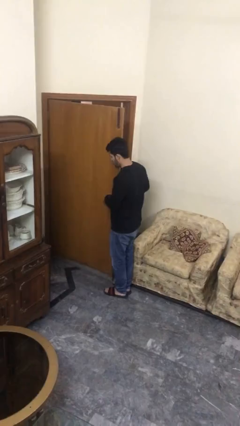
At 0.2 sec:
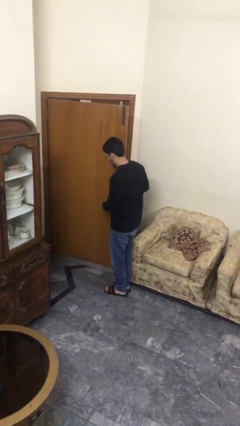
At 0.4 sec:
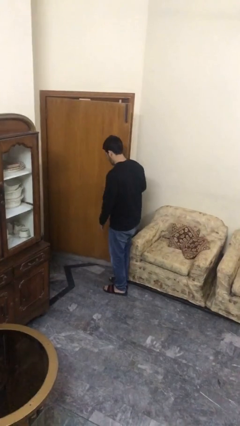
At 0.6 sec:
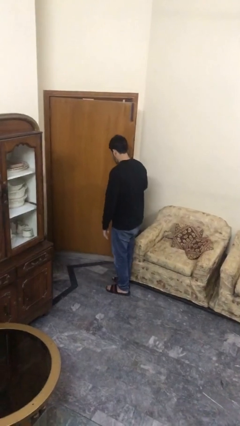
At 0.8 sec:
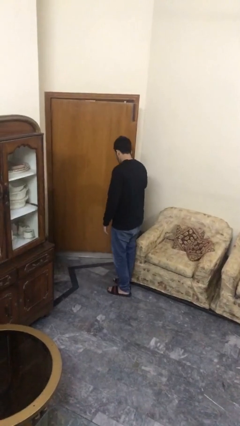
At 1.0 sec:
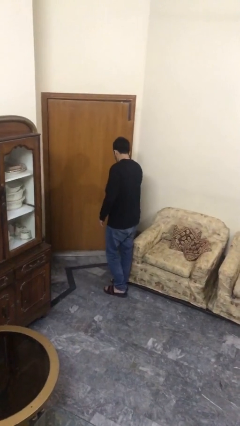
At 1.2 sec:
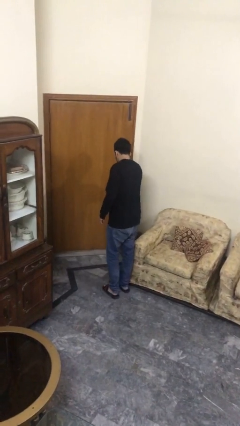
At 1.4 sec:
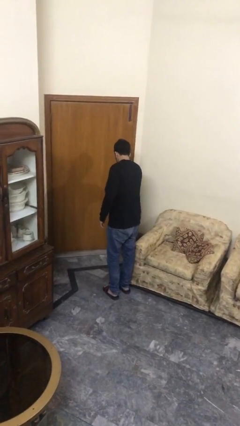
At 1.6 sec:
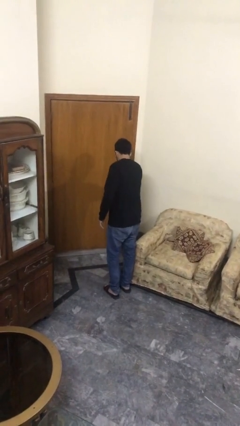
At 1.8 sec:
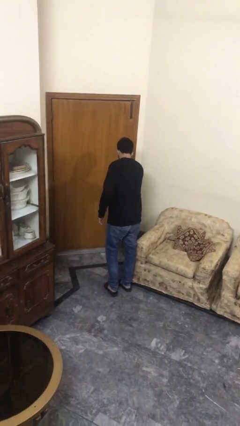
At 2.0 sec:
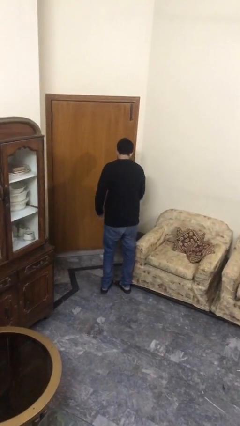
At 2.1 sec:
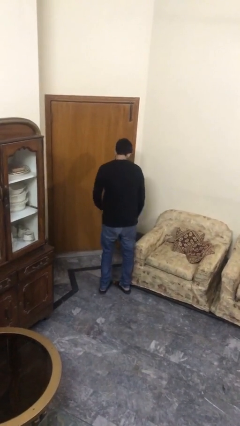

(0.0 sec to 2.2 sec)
person closes facility door

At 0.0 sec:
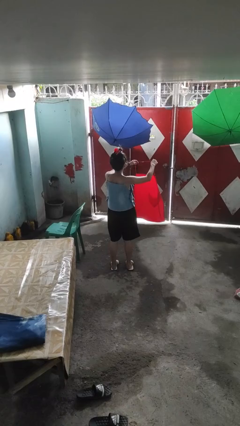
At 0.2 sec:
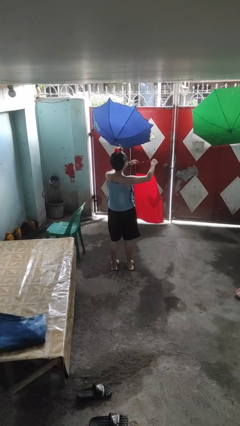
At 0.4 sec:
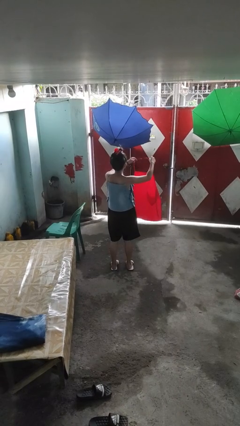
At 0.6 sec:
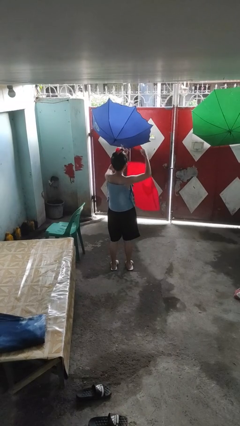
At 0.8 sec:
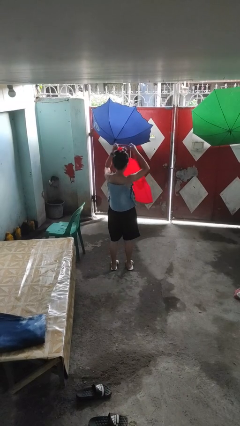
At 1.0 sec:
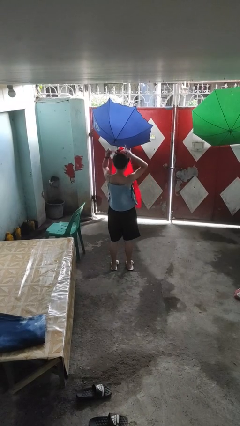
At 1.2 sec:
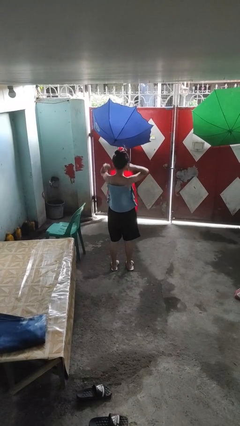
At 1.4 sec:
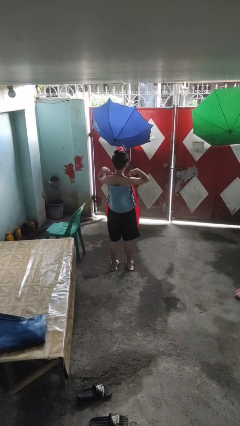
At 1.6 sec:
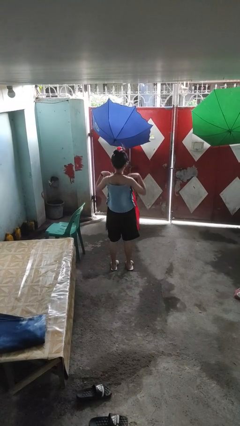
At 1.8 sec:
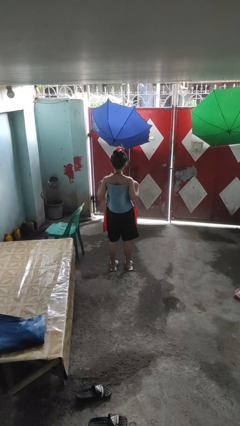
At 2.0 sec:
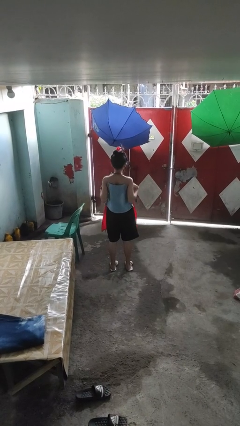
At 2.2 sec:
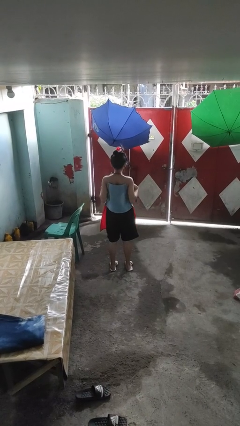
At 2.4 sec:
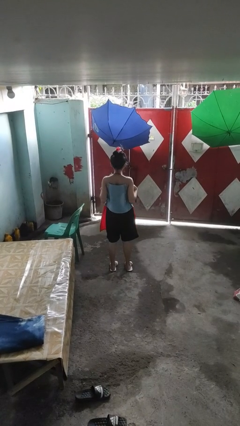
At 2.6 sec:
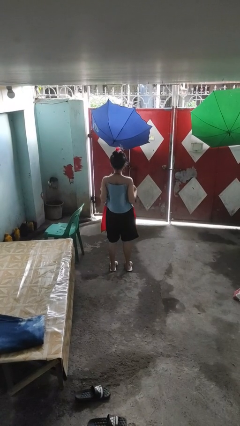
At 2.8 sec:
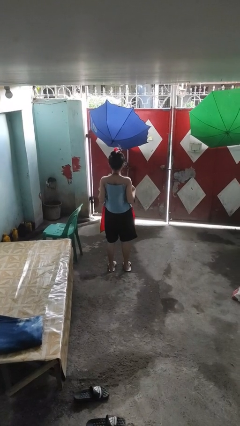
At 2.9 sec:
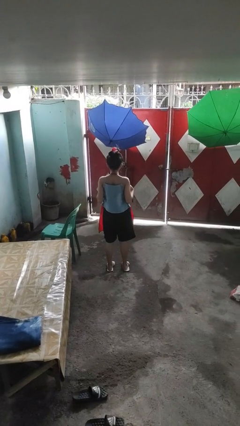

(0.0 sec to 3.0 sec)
person puts on apron

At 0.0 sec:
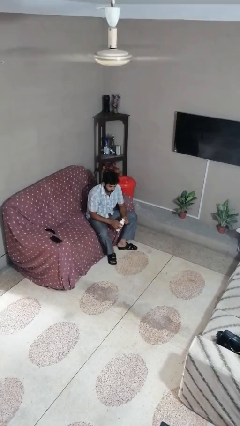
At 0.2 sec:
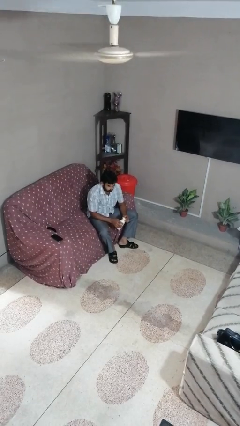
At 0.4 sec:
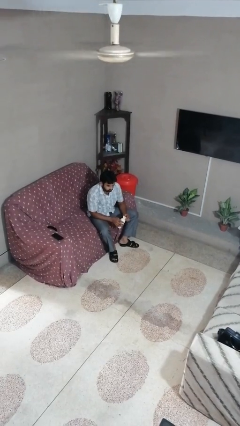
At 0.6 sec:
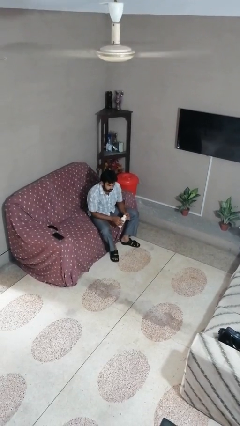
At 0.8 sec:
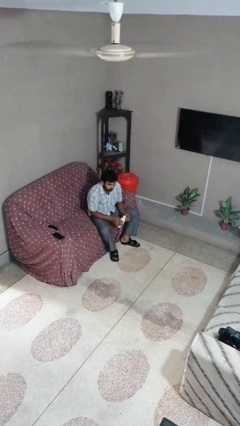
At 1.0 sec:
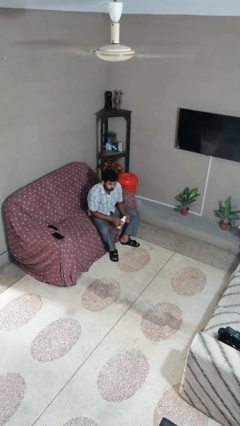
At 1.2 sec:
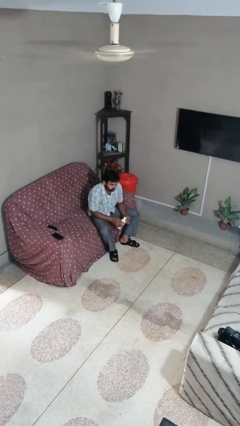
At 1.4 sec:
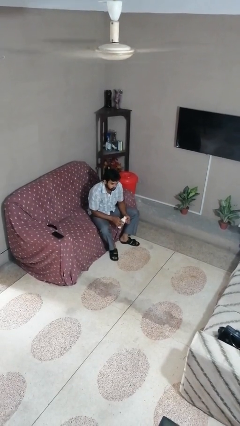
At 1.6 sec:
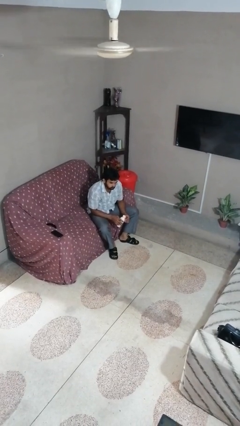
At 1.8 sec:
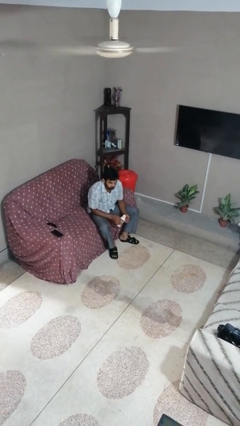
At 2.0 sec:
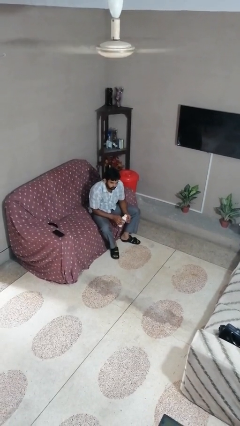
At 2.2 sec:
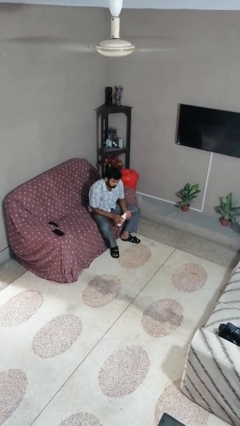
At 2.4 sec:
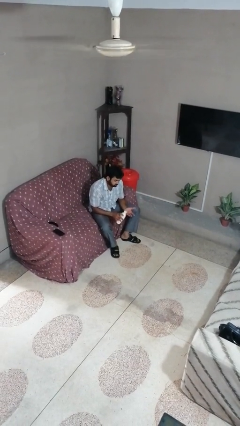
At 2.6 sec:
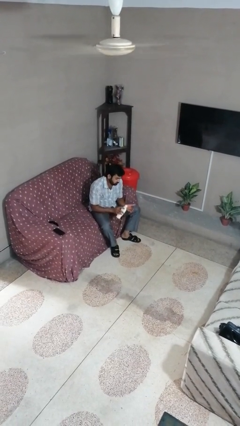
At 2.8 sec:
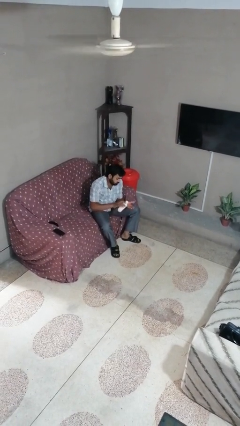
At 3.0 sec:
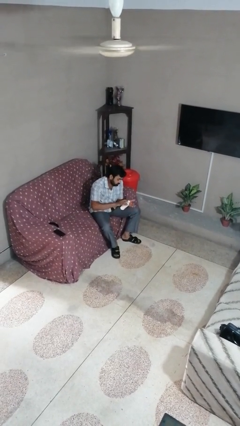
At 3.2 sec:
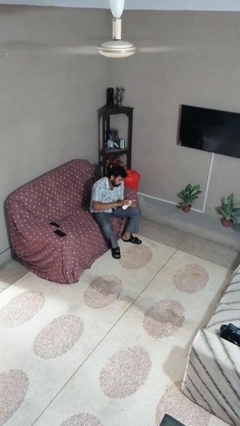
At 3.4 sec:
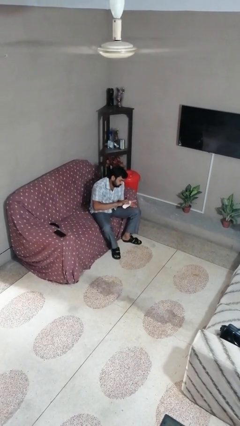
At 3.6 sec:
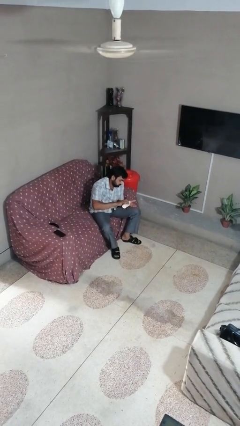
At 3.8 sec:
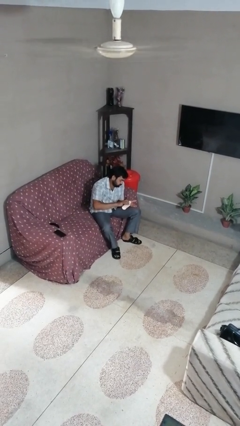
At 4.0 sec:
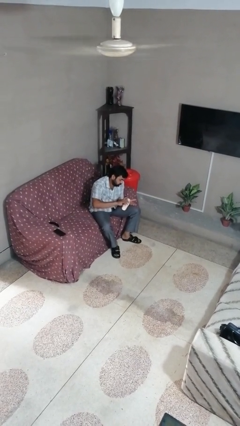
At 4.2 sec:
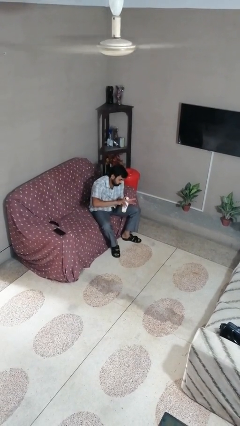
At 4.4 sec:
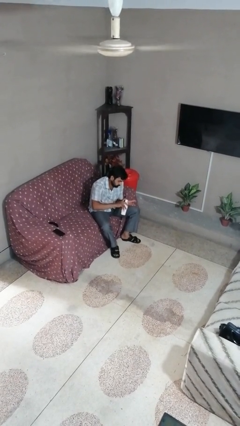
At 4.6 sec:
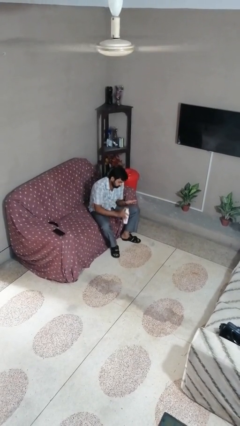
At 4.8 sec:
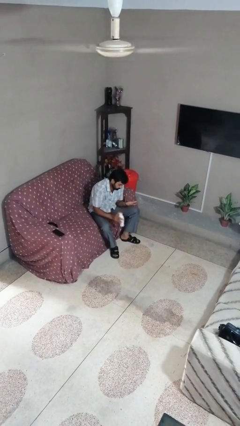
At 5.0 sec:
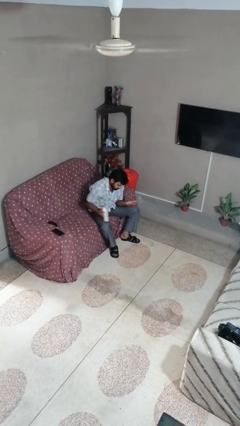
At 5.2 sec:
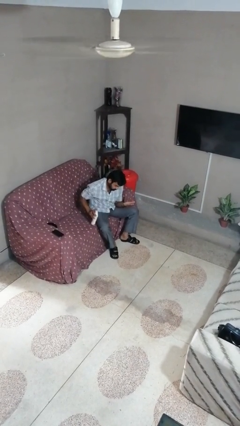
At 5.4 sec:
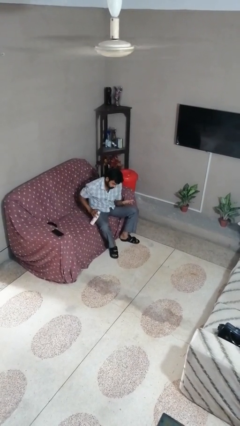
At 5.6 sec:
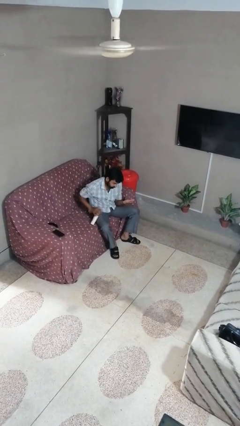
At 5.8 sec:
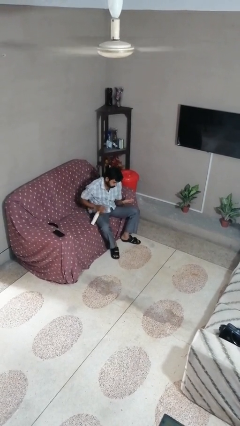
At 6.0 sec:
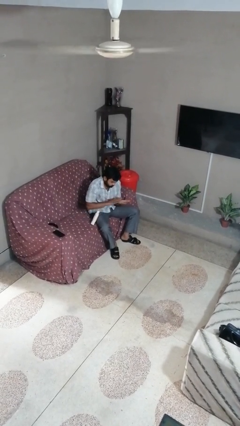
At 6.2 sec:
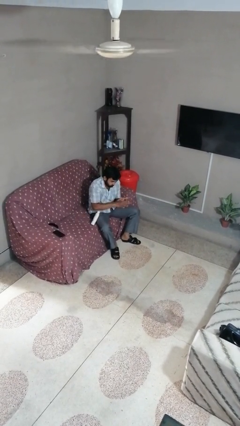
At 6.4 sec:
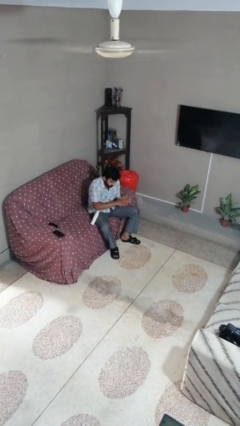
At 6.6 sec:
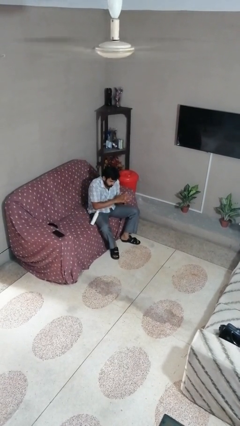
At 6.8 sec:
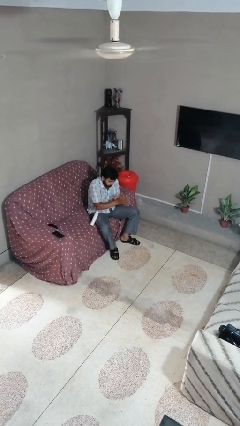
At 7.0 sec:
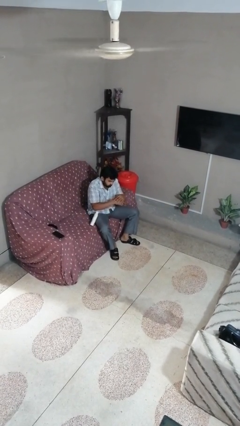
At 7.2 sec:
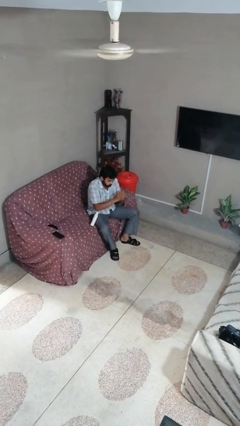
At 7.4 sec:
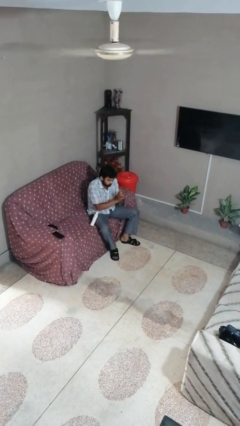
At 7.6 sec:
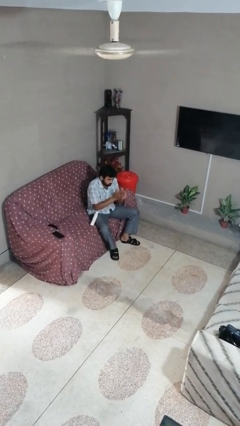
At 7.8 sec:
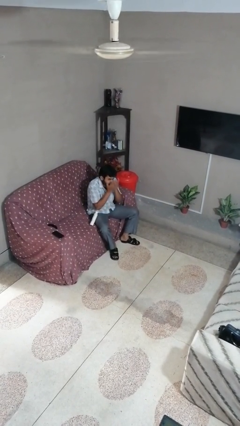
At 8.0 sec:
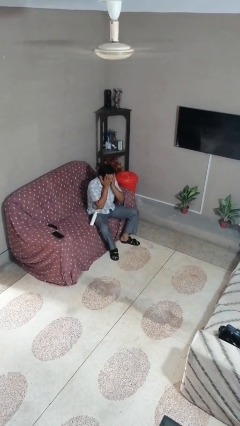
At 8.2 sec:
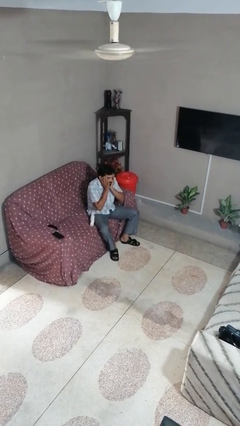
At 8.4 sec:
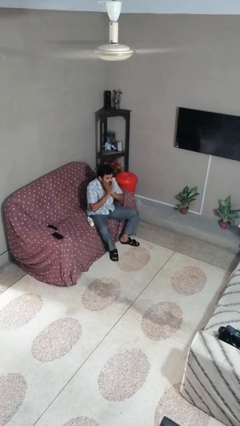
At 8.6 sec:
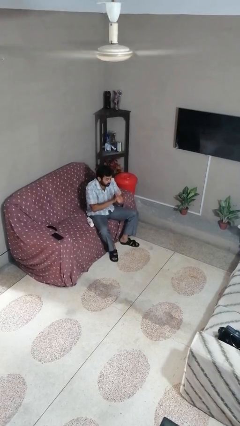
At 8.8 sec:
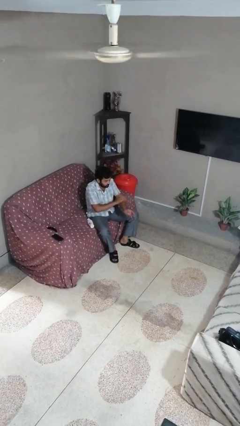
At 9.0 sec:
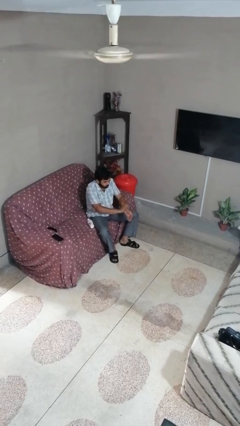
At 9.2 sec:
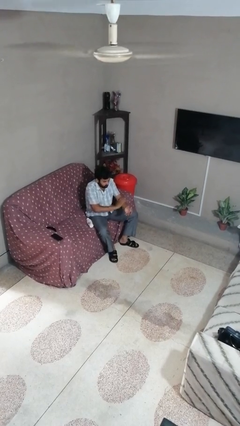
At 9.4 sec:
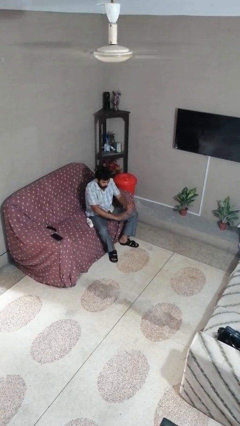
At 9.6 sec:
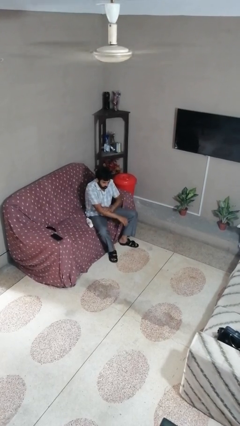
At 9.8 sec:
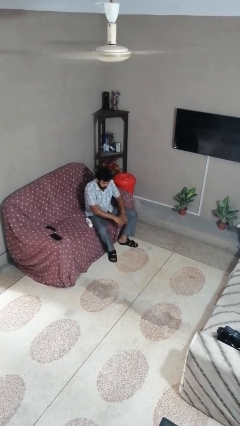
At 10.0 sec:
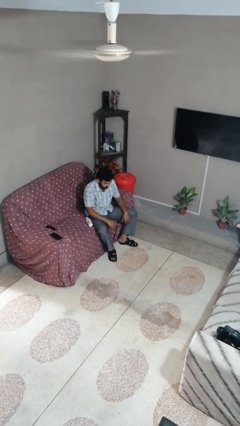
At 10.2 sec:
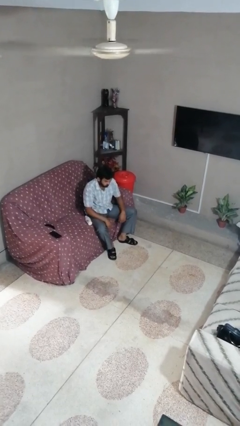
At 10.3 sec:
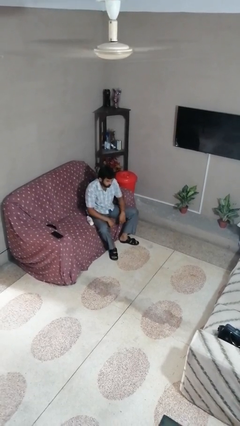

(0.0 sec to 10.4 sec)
person applies sunscreen

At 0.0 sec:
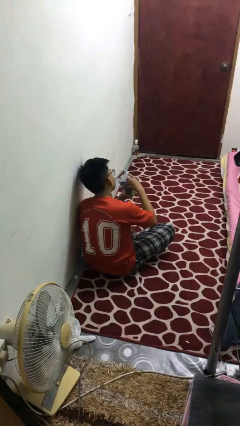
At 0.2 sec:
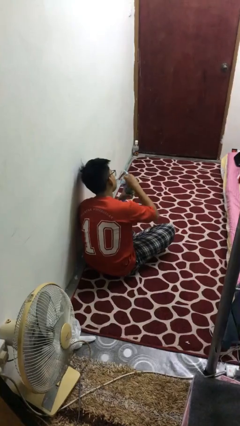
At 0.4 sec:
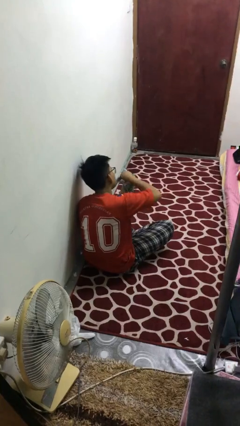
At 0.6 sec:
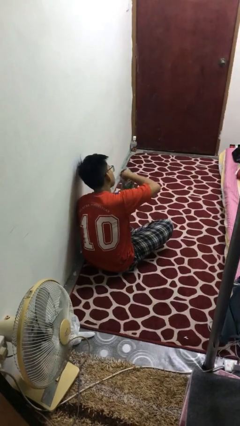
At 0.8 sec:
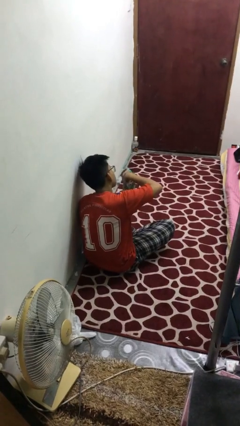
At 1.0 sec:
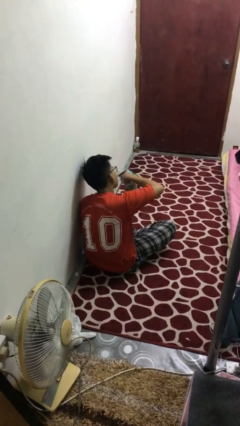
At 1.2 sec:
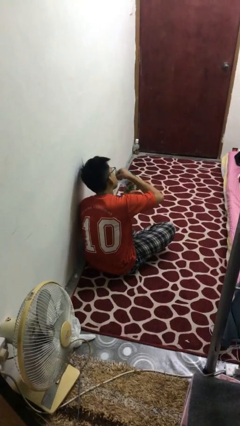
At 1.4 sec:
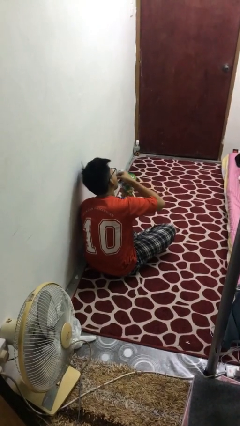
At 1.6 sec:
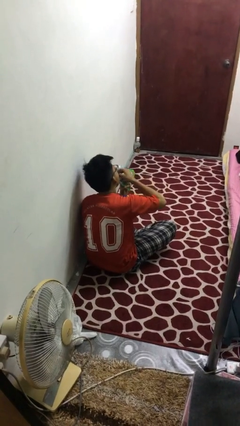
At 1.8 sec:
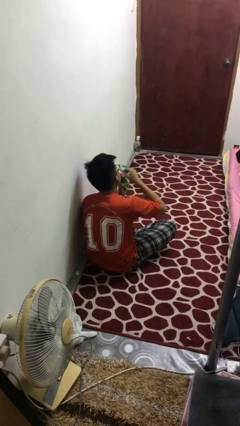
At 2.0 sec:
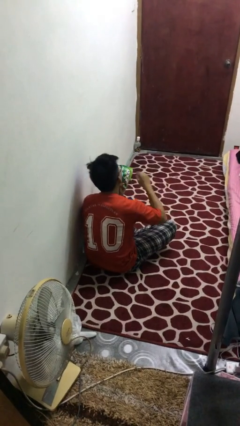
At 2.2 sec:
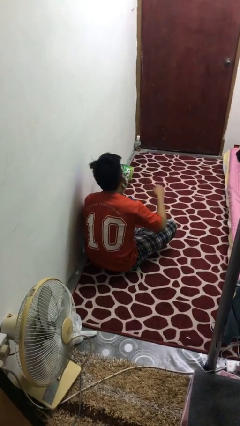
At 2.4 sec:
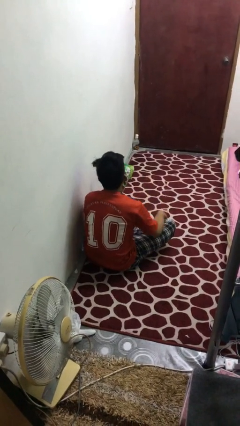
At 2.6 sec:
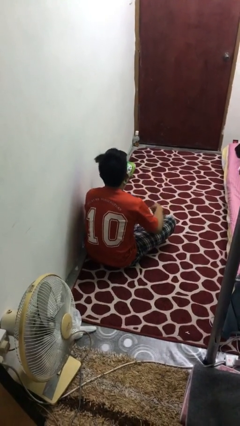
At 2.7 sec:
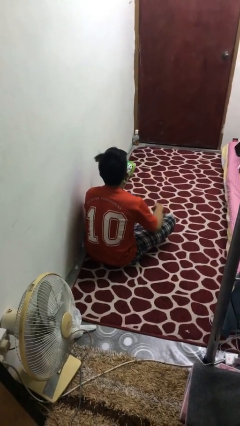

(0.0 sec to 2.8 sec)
person eats snack from bag
